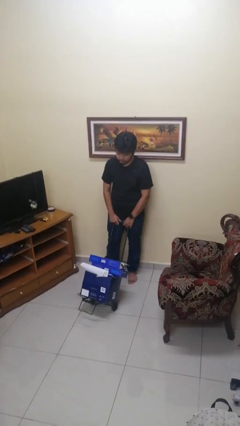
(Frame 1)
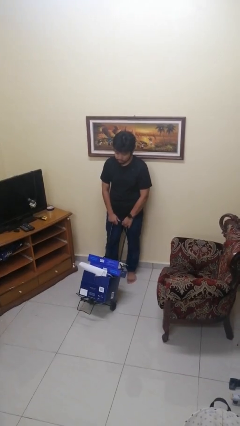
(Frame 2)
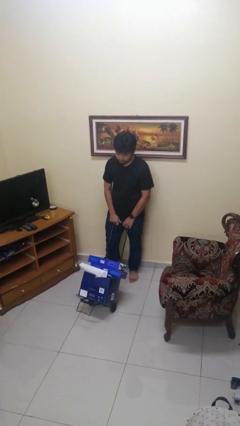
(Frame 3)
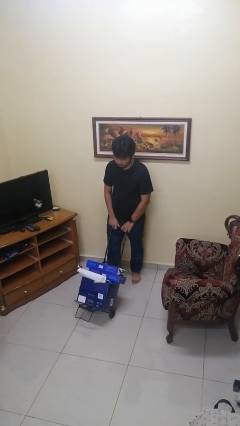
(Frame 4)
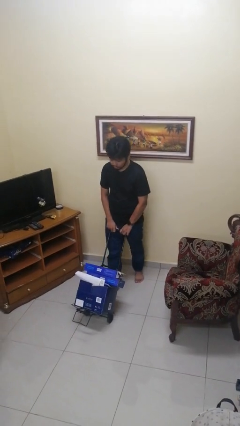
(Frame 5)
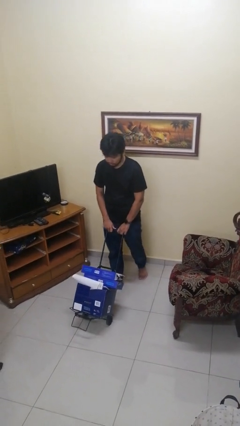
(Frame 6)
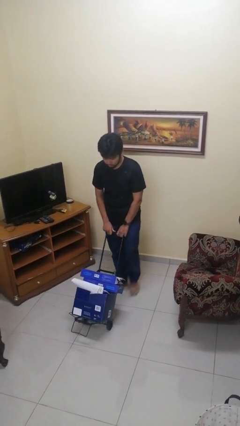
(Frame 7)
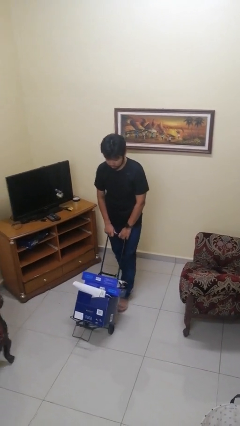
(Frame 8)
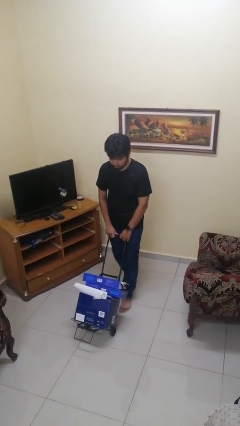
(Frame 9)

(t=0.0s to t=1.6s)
person pushes wheeled cart

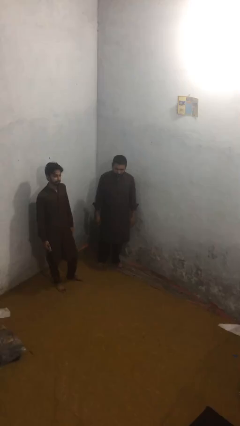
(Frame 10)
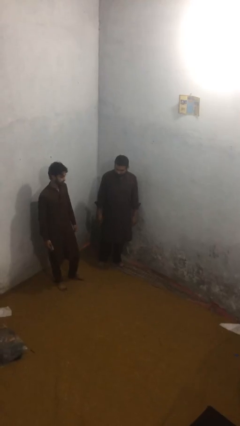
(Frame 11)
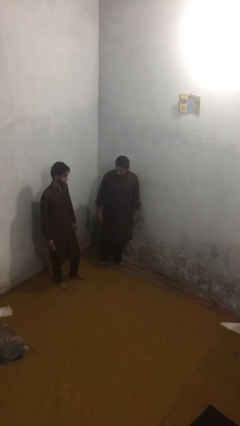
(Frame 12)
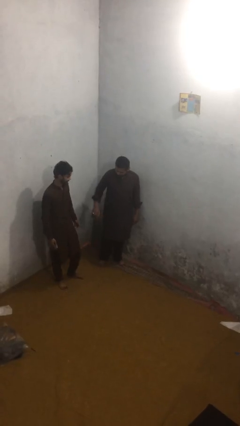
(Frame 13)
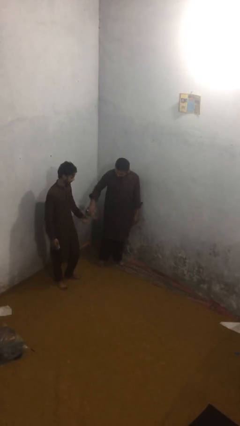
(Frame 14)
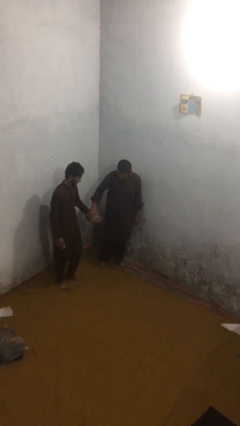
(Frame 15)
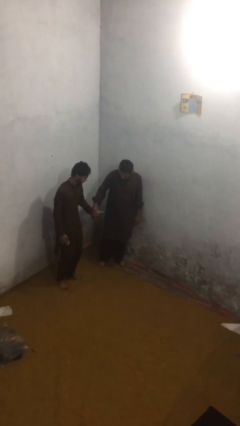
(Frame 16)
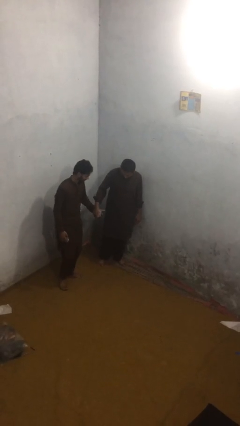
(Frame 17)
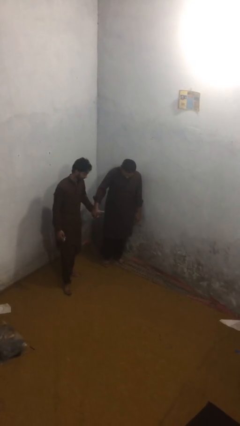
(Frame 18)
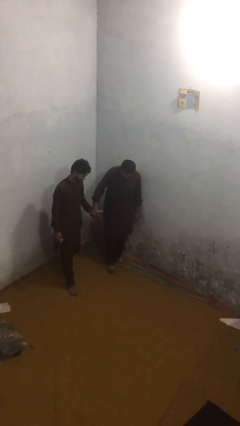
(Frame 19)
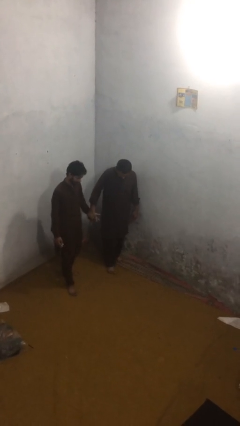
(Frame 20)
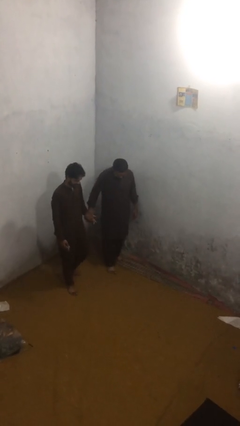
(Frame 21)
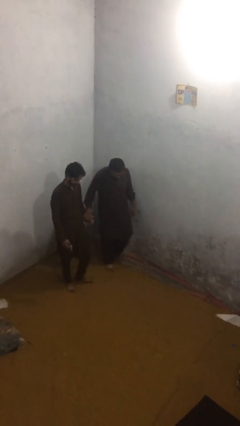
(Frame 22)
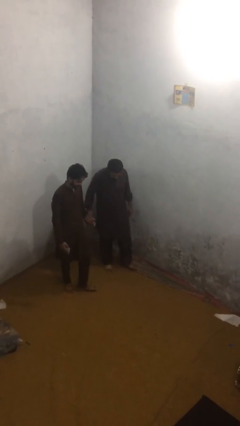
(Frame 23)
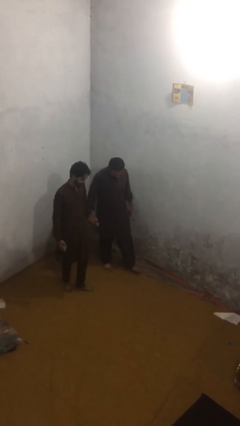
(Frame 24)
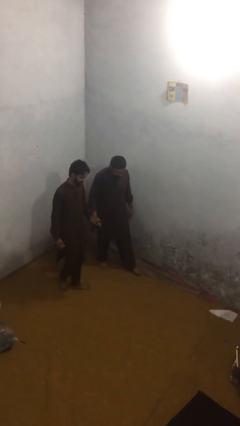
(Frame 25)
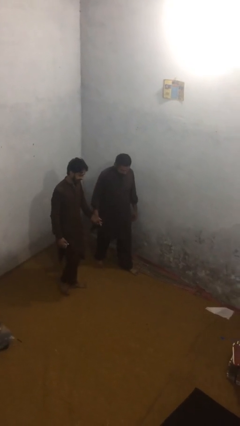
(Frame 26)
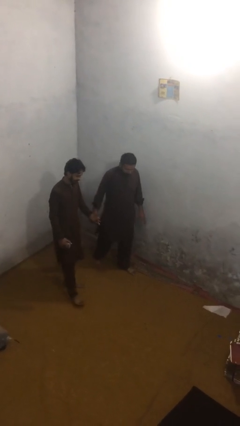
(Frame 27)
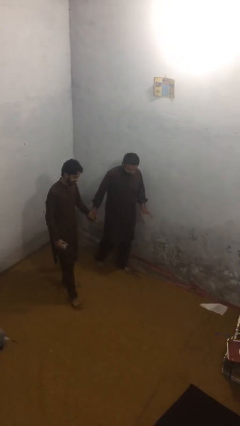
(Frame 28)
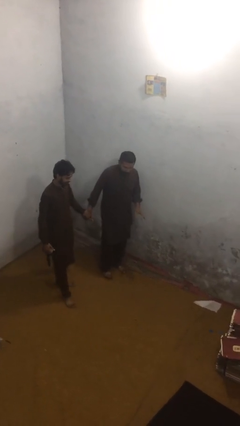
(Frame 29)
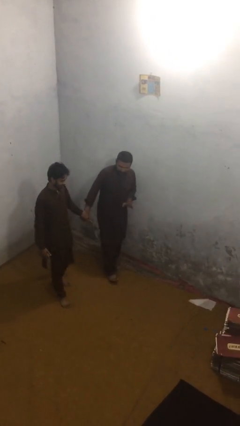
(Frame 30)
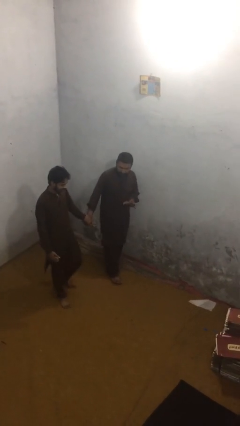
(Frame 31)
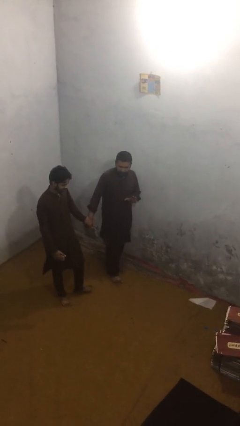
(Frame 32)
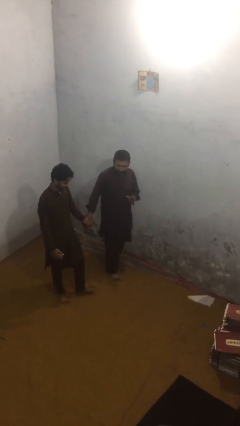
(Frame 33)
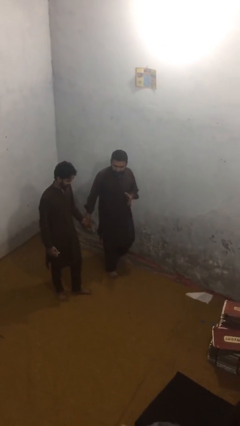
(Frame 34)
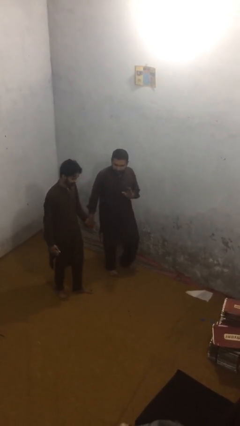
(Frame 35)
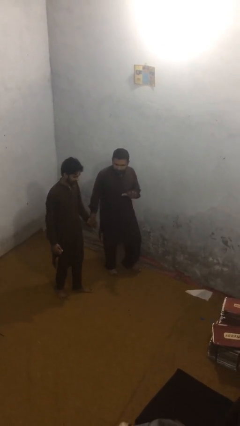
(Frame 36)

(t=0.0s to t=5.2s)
person holds hand

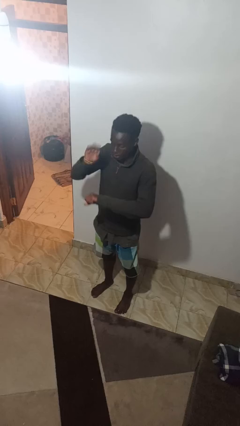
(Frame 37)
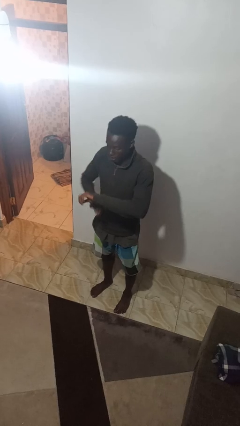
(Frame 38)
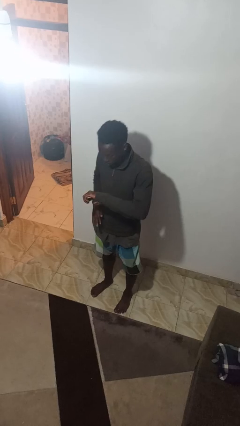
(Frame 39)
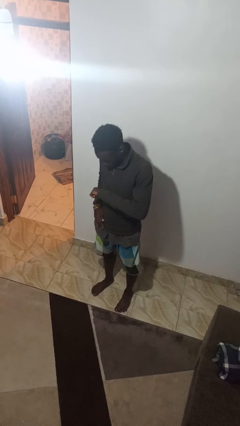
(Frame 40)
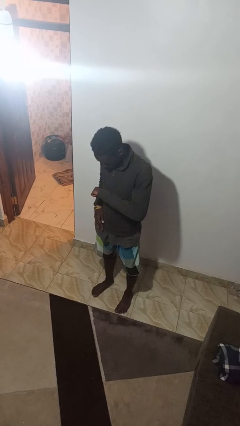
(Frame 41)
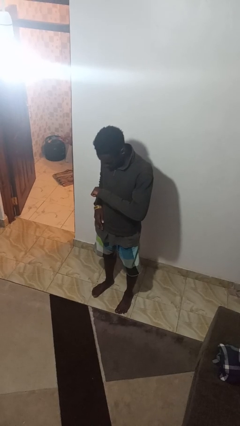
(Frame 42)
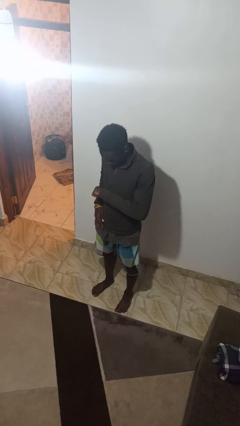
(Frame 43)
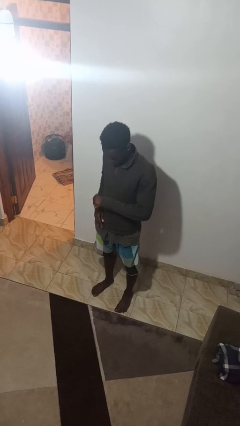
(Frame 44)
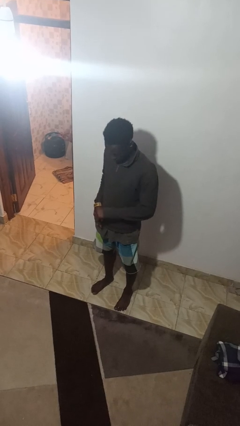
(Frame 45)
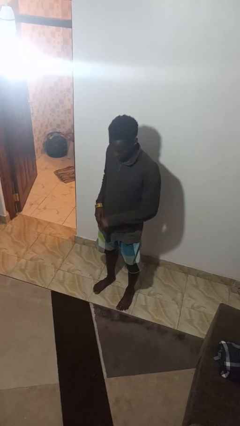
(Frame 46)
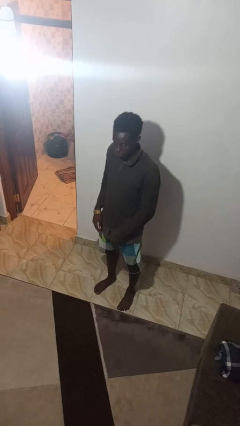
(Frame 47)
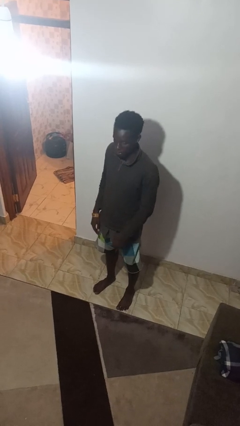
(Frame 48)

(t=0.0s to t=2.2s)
person swats bug

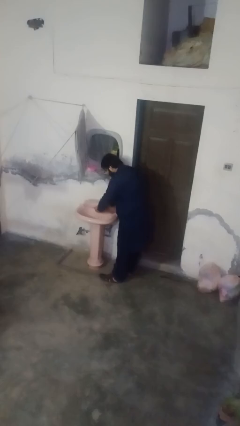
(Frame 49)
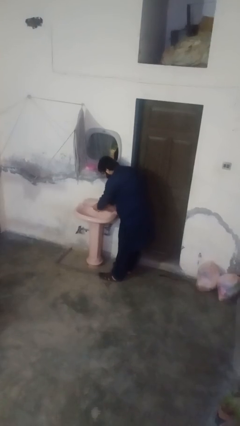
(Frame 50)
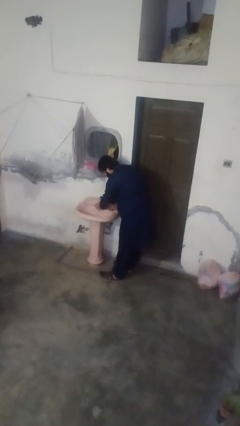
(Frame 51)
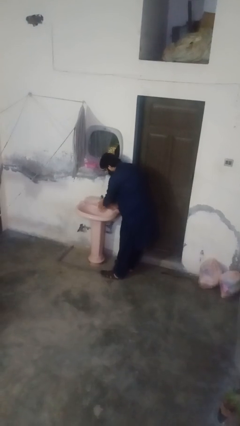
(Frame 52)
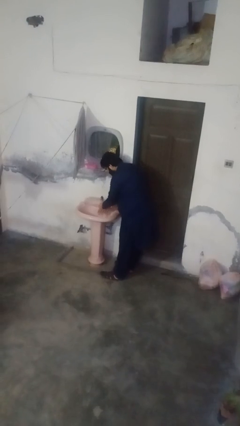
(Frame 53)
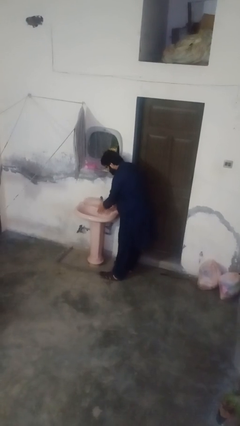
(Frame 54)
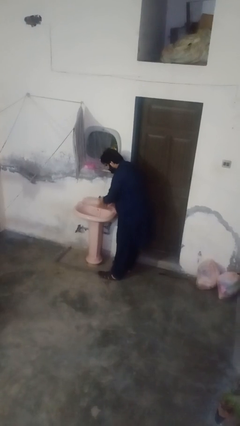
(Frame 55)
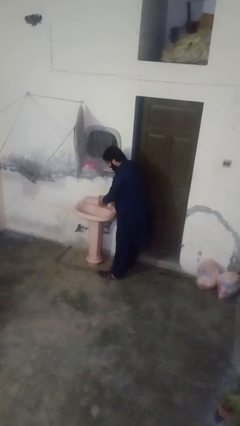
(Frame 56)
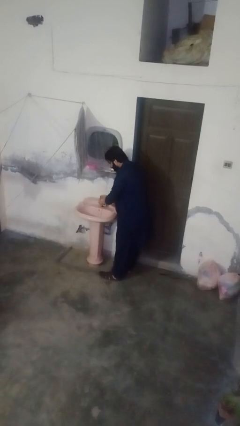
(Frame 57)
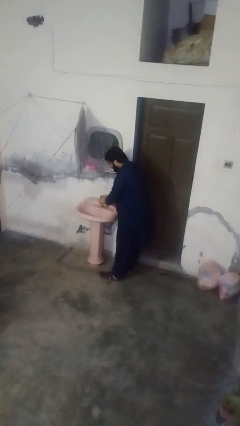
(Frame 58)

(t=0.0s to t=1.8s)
person washes hands

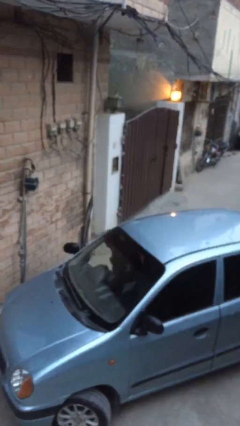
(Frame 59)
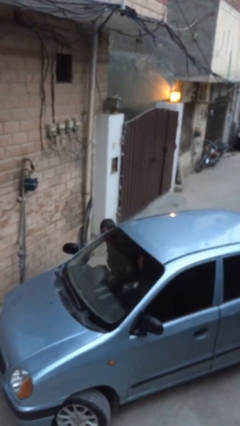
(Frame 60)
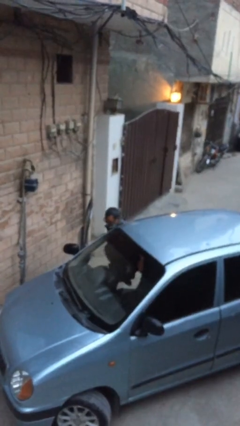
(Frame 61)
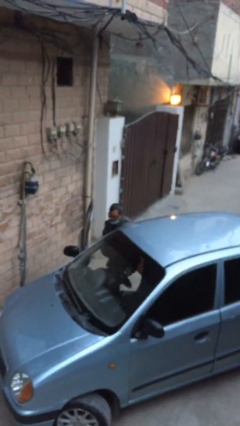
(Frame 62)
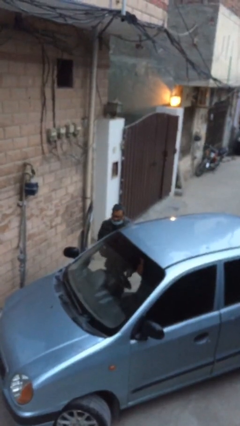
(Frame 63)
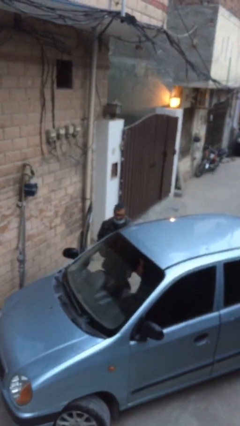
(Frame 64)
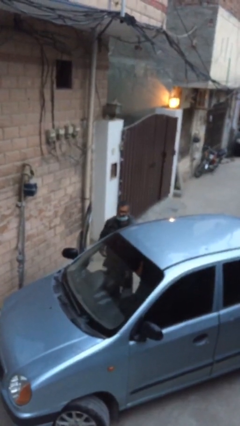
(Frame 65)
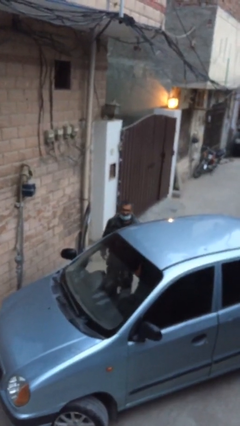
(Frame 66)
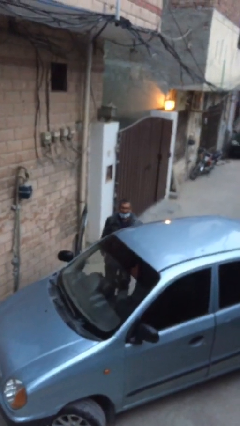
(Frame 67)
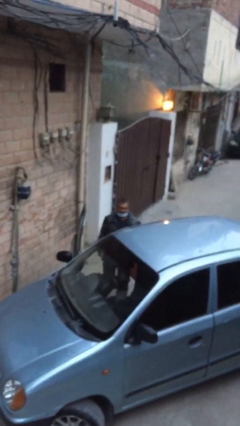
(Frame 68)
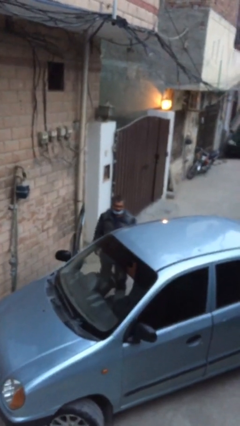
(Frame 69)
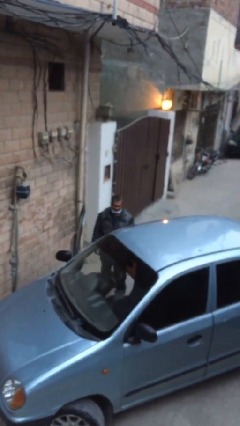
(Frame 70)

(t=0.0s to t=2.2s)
person exits car

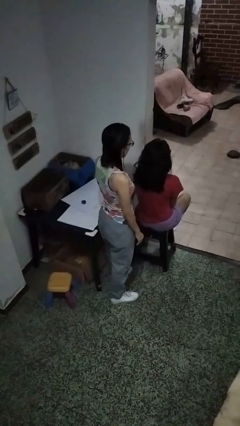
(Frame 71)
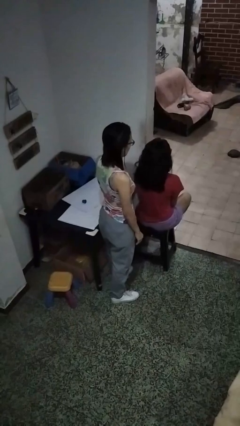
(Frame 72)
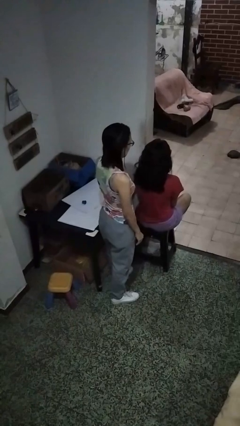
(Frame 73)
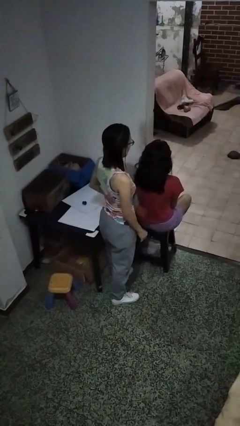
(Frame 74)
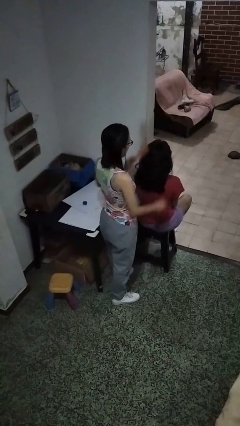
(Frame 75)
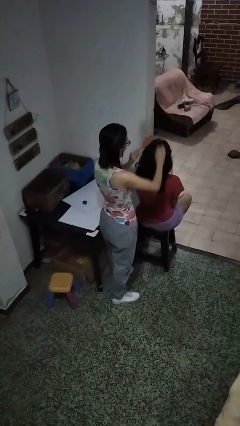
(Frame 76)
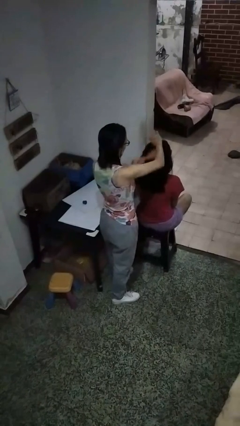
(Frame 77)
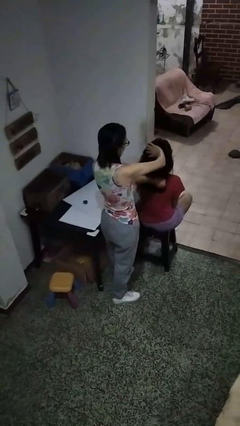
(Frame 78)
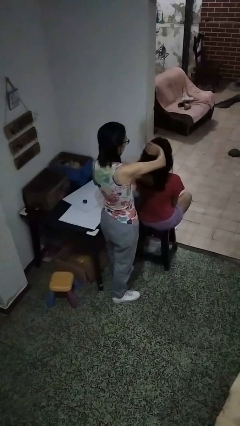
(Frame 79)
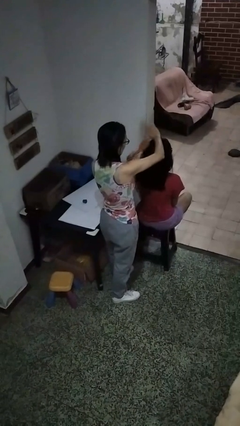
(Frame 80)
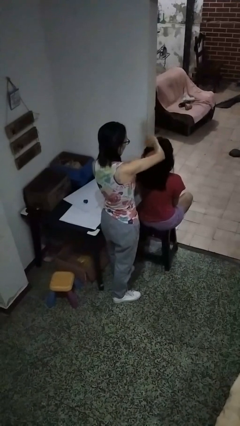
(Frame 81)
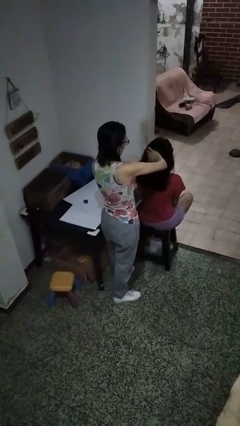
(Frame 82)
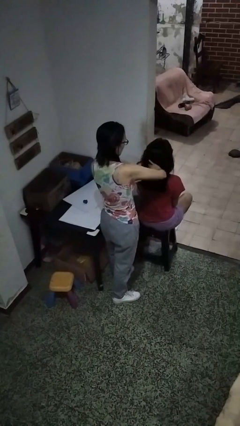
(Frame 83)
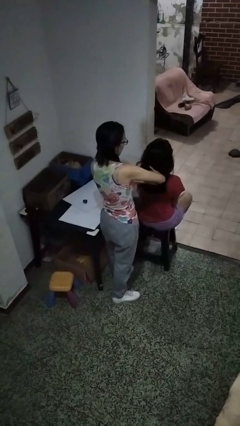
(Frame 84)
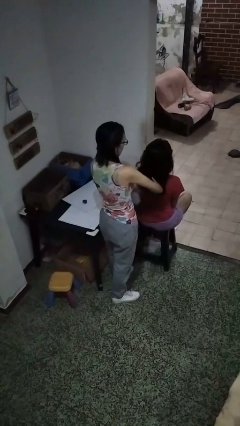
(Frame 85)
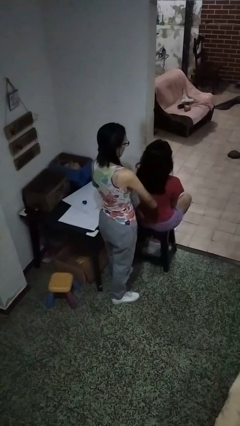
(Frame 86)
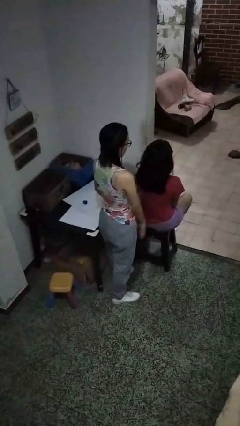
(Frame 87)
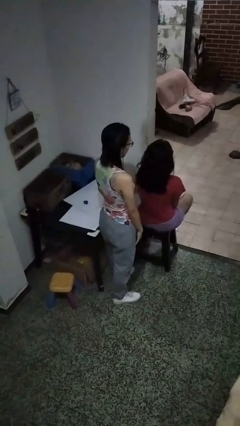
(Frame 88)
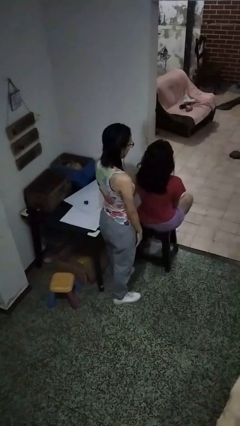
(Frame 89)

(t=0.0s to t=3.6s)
person brushes hair of person

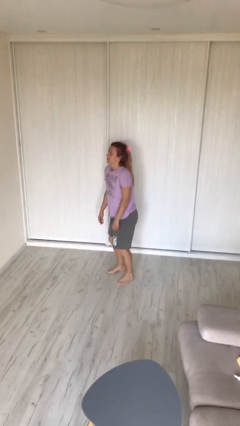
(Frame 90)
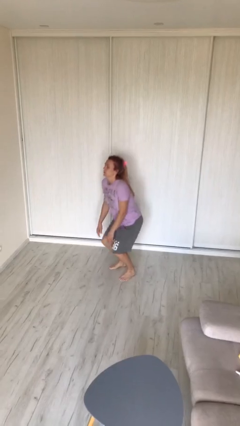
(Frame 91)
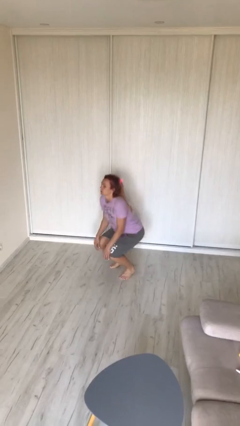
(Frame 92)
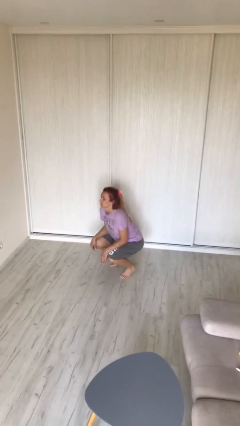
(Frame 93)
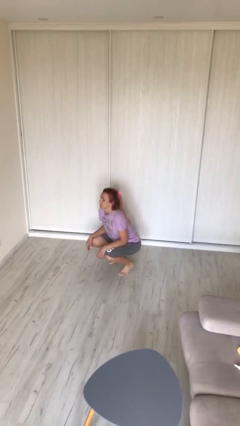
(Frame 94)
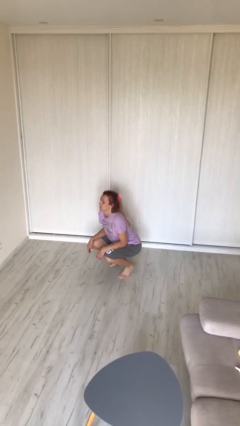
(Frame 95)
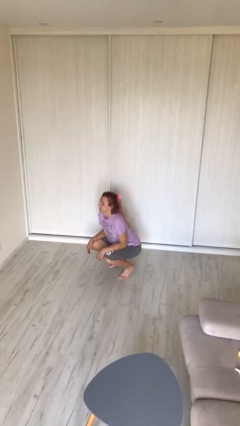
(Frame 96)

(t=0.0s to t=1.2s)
person squats
